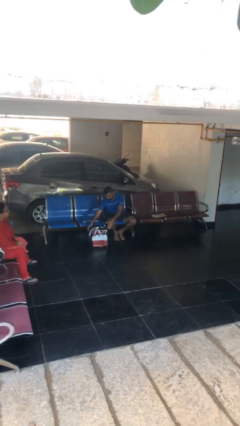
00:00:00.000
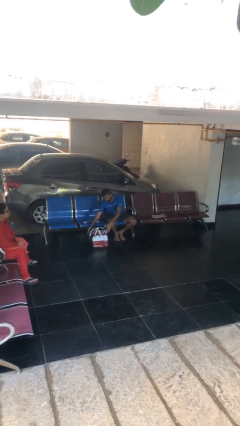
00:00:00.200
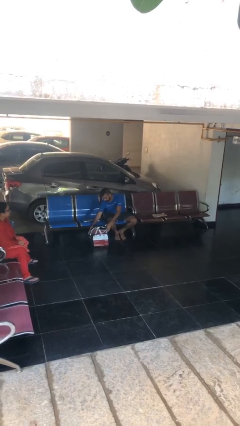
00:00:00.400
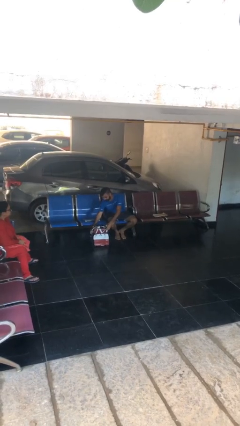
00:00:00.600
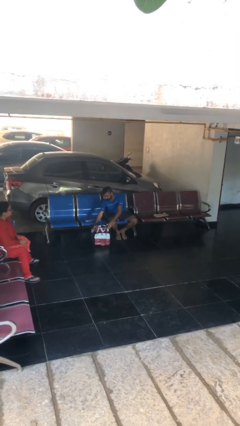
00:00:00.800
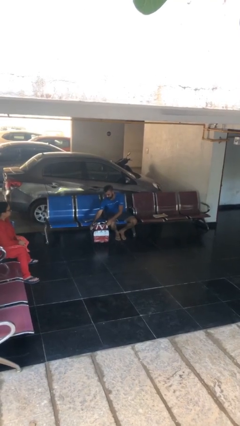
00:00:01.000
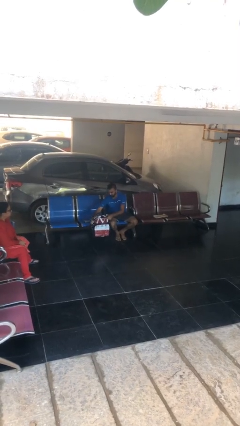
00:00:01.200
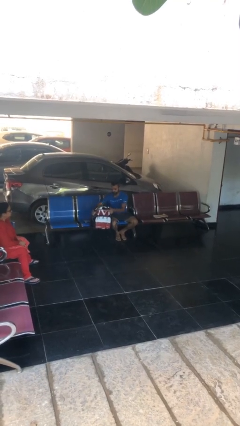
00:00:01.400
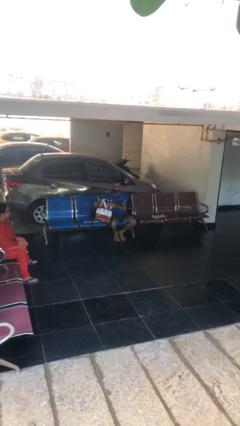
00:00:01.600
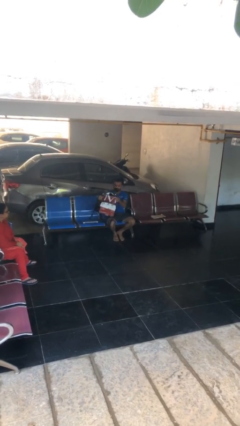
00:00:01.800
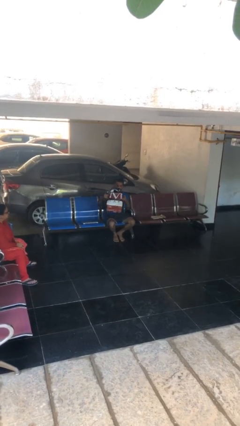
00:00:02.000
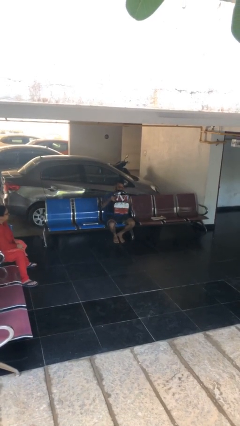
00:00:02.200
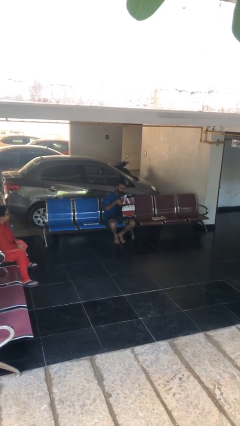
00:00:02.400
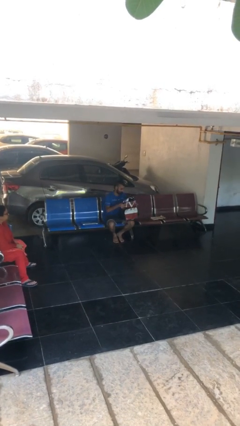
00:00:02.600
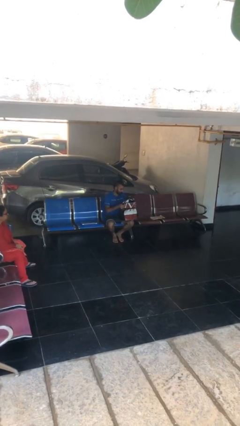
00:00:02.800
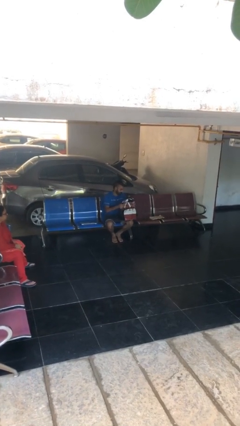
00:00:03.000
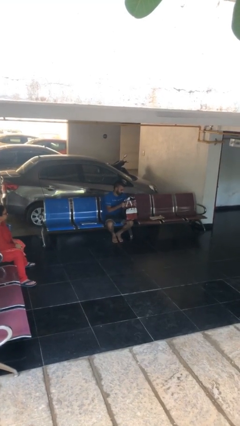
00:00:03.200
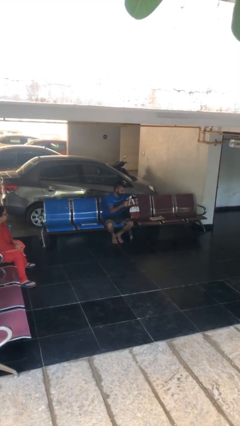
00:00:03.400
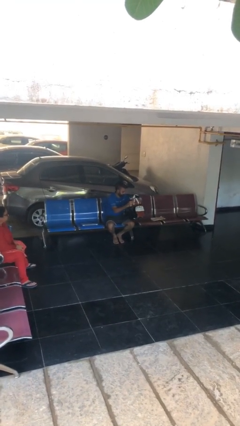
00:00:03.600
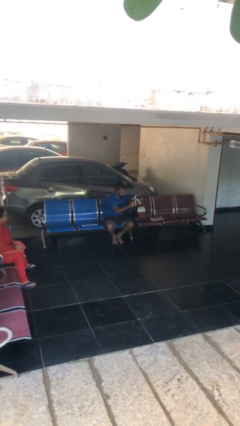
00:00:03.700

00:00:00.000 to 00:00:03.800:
person picks up object from floor

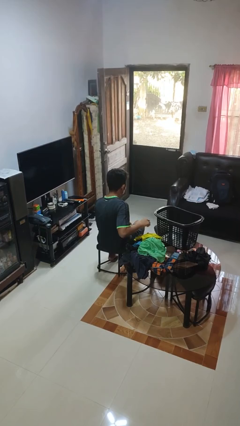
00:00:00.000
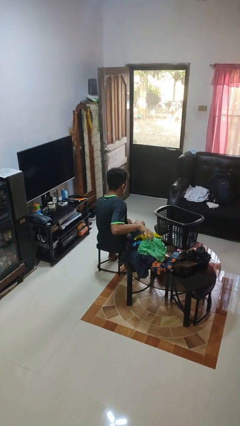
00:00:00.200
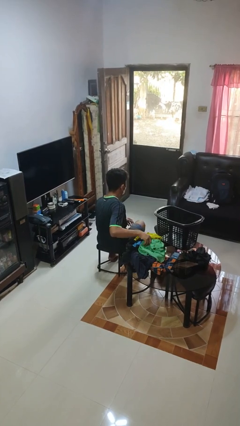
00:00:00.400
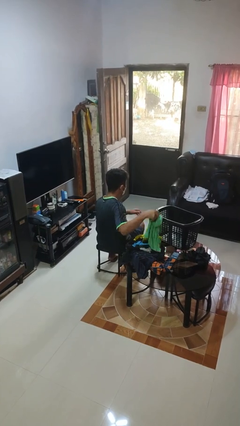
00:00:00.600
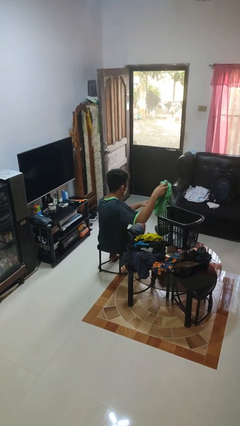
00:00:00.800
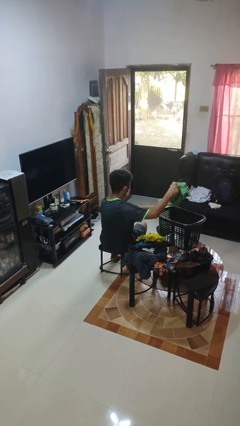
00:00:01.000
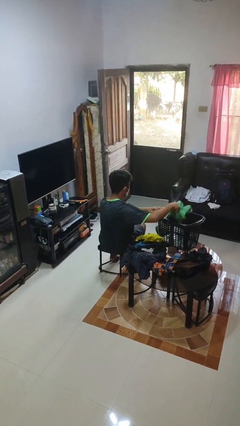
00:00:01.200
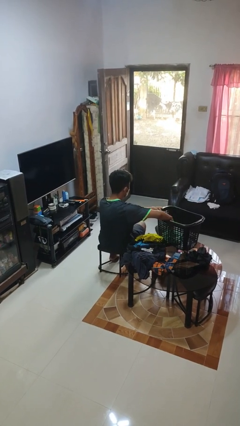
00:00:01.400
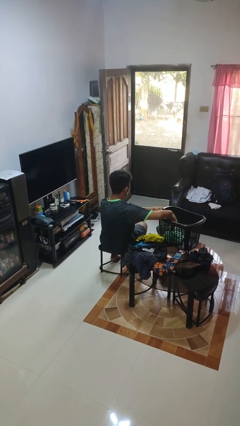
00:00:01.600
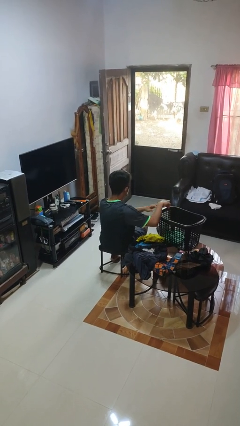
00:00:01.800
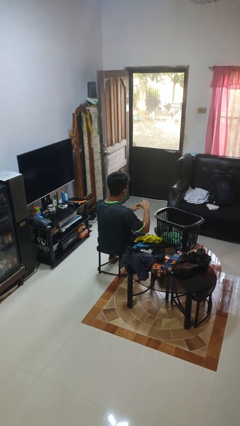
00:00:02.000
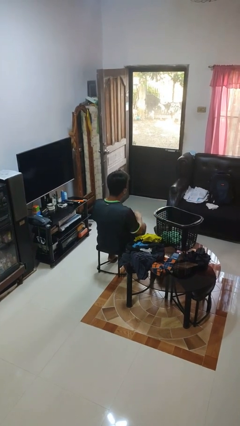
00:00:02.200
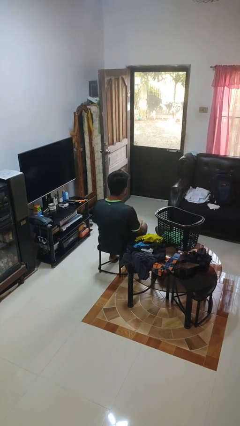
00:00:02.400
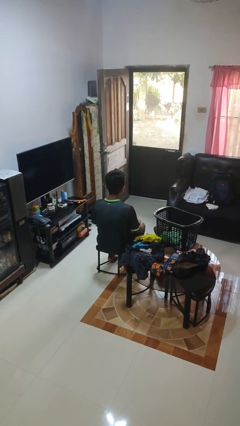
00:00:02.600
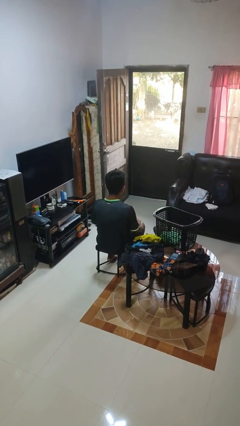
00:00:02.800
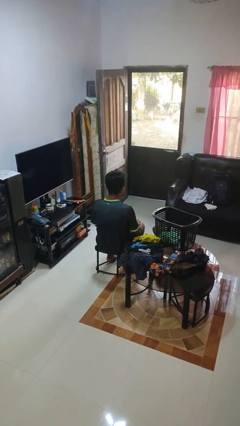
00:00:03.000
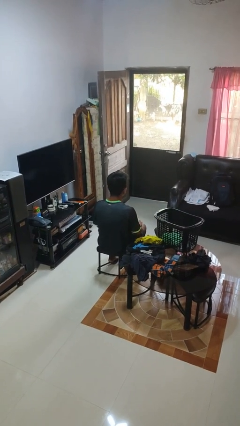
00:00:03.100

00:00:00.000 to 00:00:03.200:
person puts object into basket

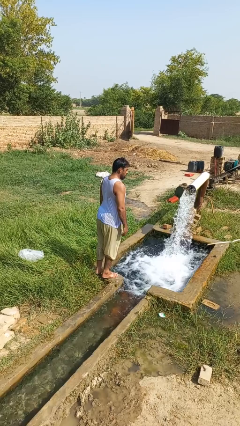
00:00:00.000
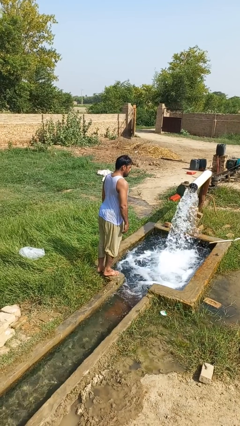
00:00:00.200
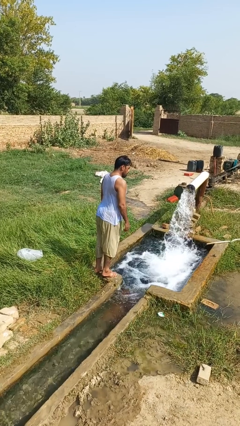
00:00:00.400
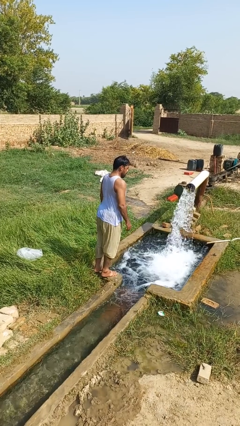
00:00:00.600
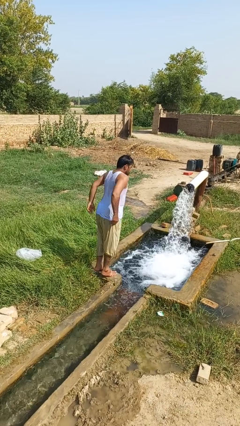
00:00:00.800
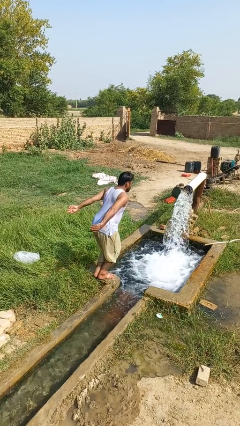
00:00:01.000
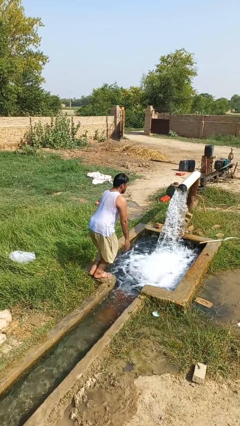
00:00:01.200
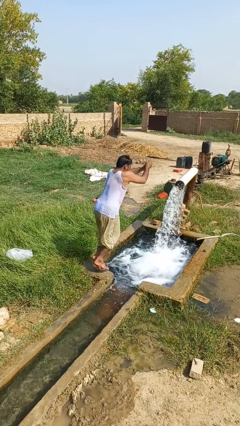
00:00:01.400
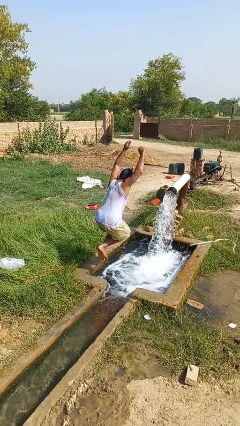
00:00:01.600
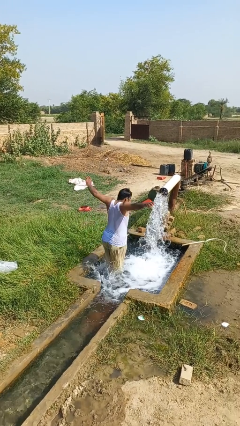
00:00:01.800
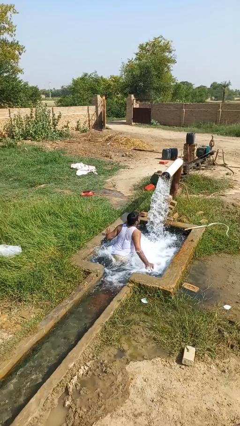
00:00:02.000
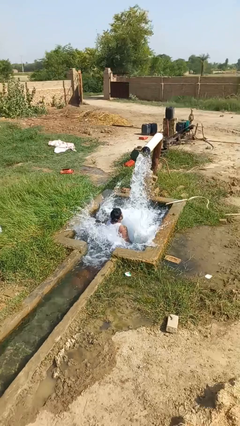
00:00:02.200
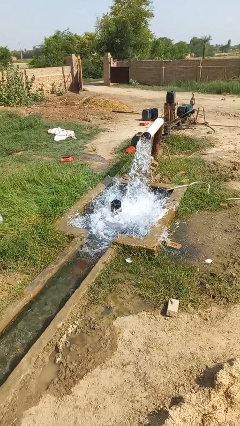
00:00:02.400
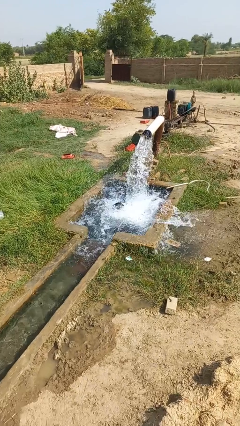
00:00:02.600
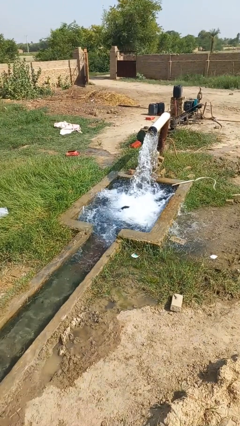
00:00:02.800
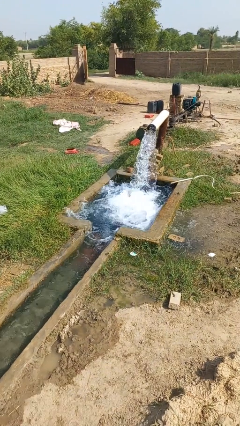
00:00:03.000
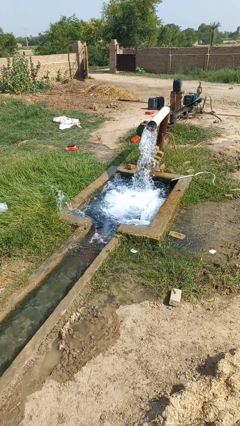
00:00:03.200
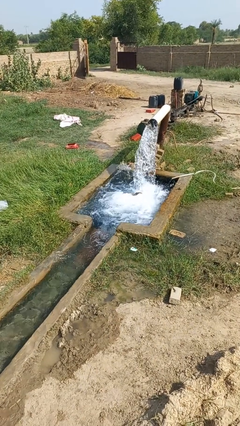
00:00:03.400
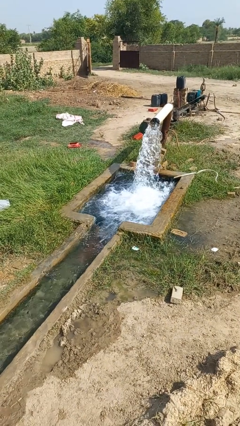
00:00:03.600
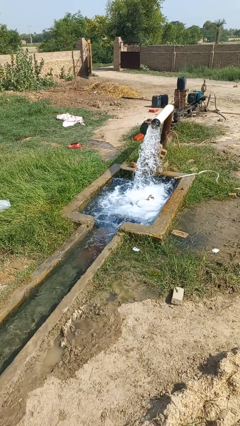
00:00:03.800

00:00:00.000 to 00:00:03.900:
person jumps into pool

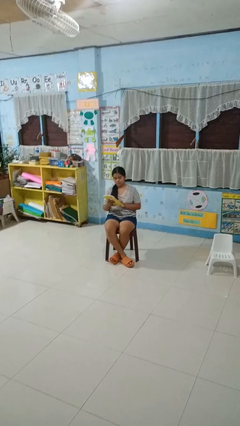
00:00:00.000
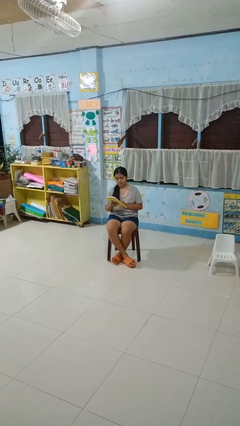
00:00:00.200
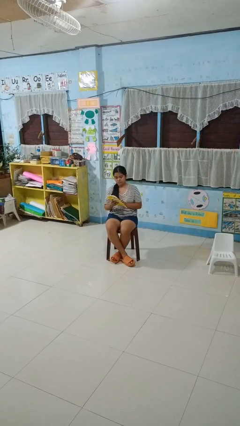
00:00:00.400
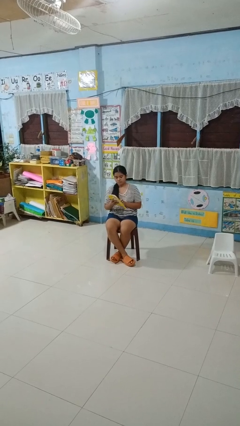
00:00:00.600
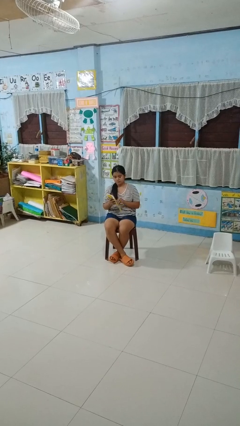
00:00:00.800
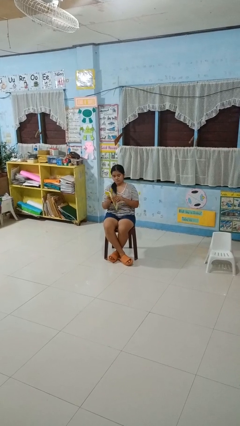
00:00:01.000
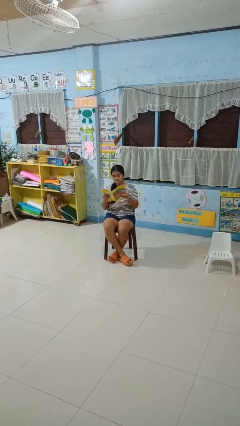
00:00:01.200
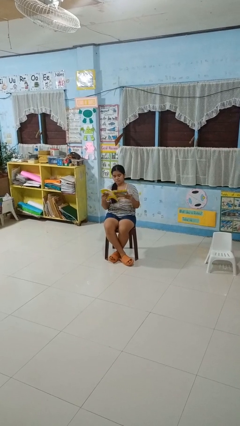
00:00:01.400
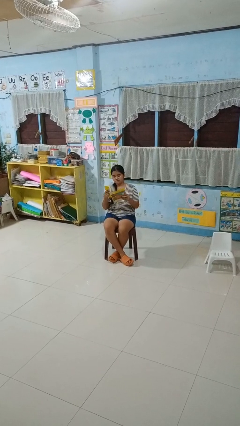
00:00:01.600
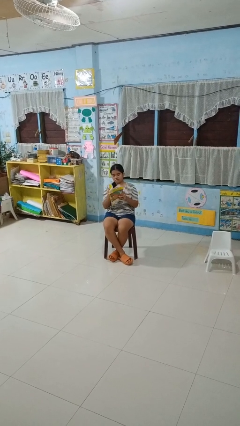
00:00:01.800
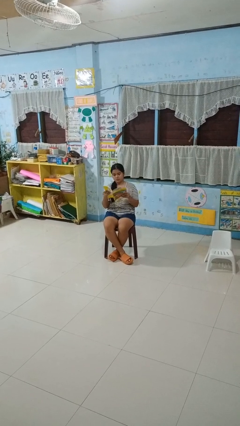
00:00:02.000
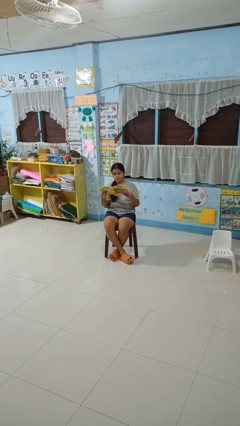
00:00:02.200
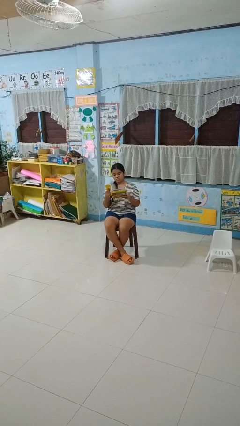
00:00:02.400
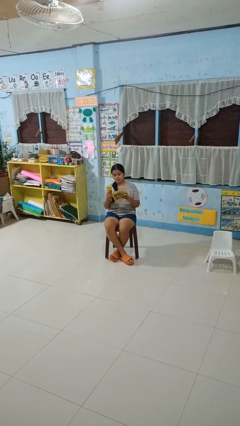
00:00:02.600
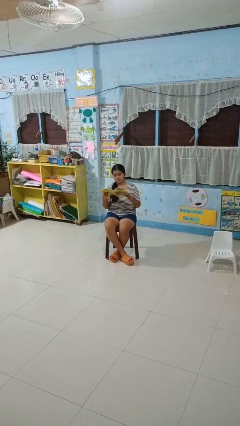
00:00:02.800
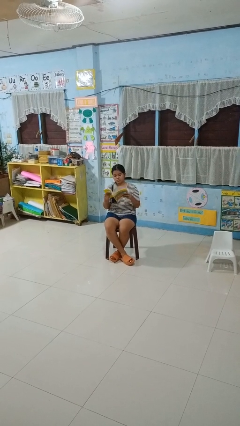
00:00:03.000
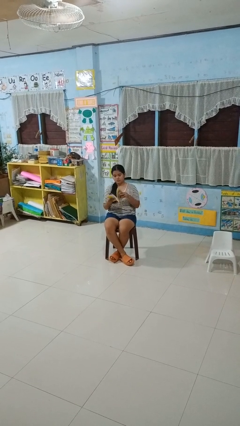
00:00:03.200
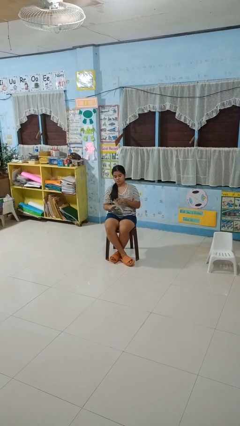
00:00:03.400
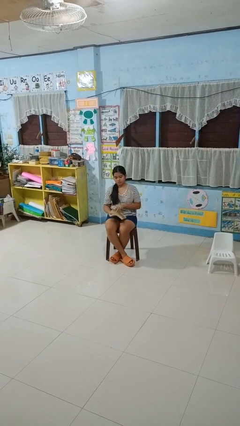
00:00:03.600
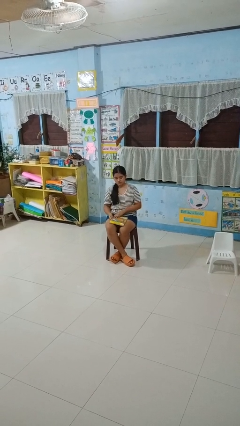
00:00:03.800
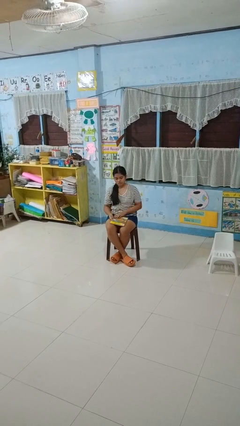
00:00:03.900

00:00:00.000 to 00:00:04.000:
person reads book

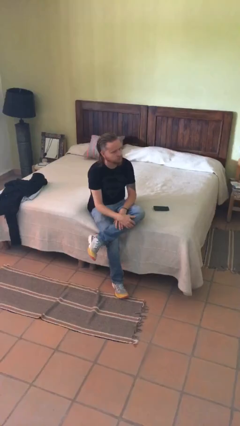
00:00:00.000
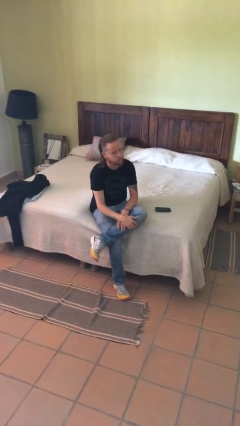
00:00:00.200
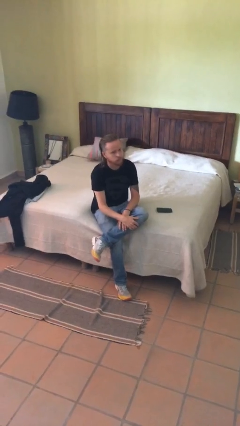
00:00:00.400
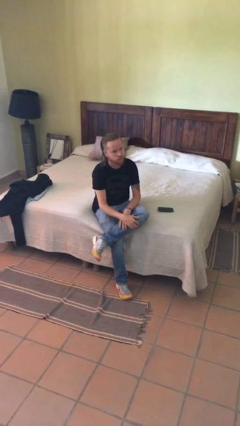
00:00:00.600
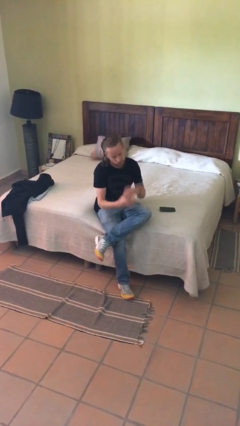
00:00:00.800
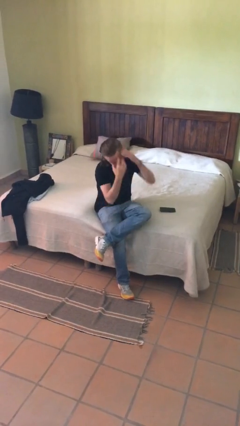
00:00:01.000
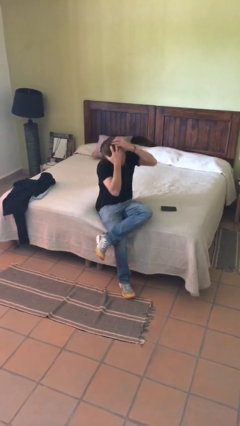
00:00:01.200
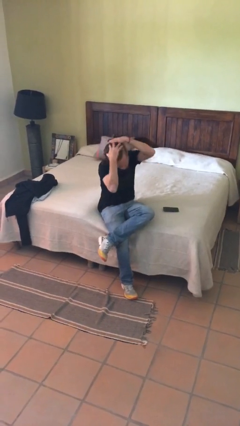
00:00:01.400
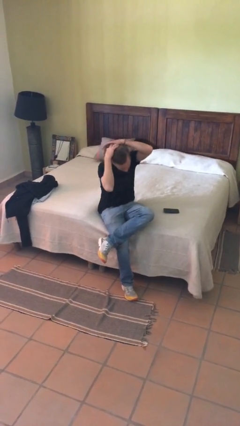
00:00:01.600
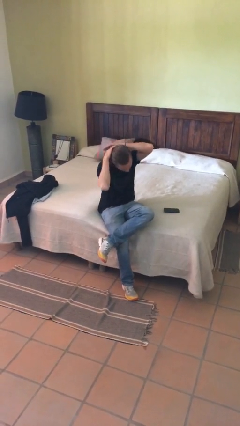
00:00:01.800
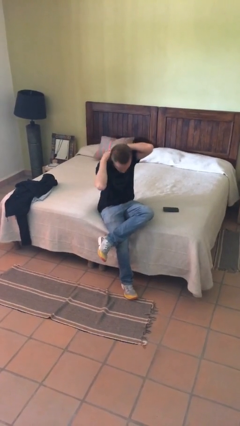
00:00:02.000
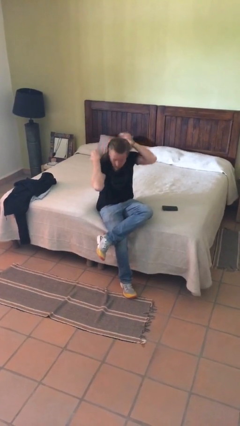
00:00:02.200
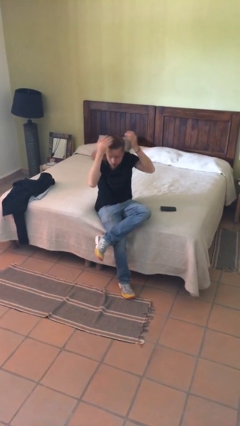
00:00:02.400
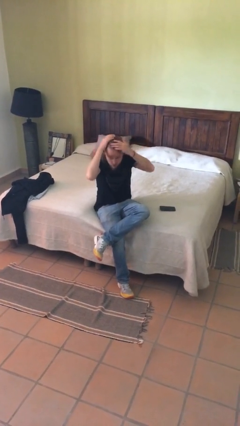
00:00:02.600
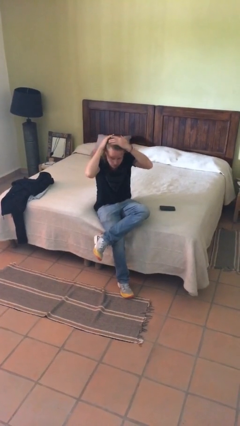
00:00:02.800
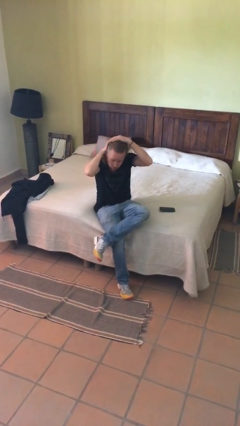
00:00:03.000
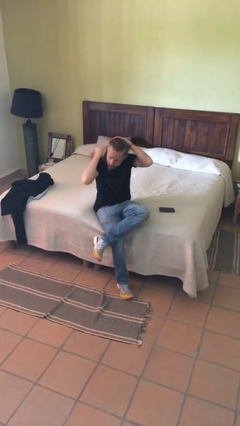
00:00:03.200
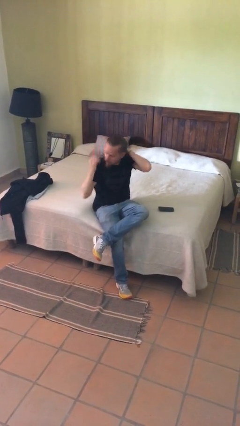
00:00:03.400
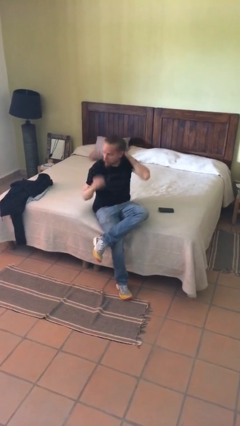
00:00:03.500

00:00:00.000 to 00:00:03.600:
person strokes hair
